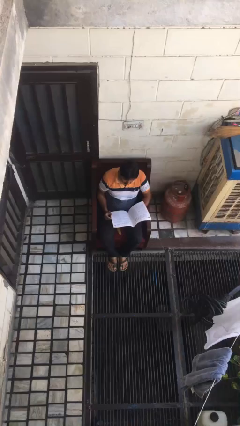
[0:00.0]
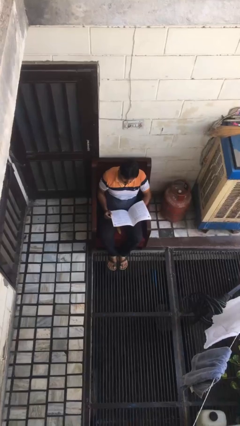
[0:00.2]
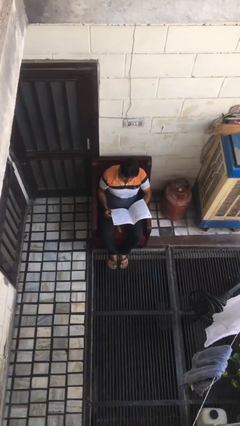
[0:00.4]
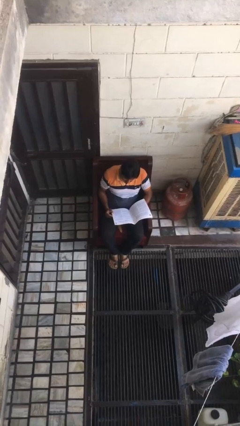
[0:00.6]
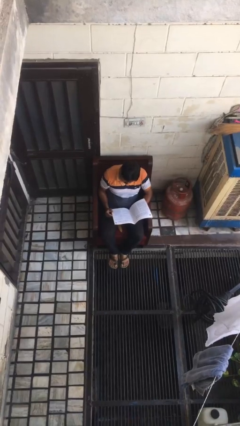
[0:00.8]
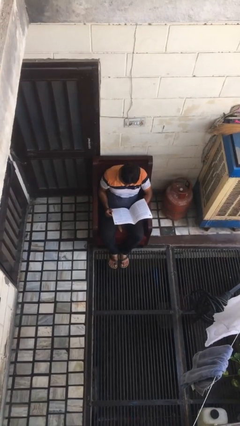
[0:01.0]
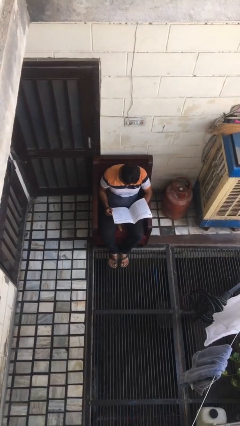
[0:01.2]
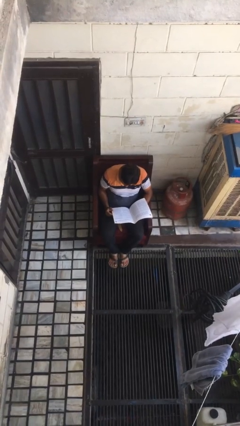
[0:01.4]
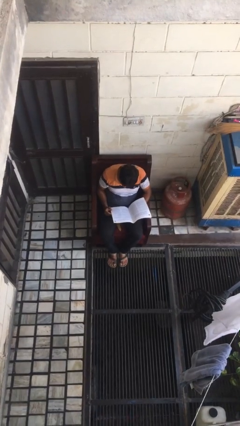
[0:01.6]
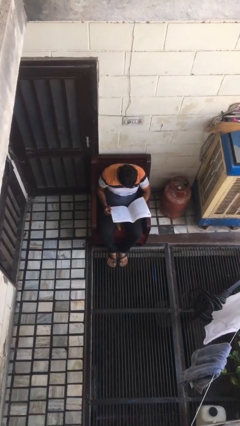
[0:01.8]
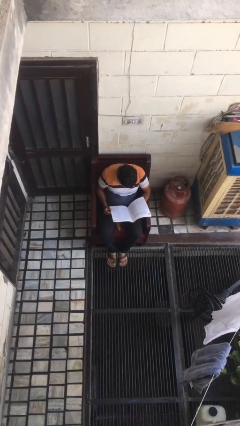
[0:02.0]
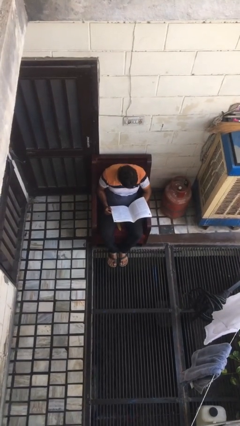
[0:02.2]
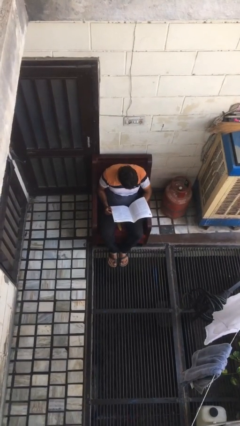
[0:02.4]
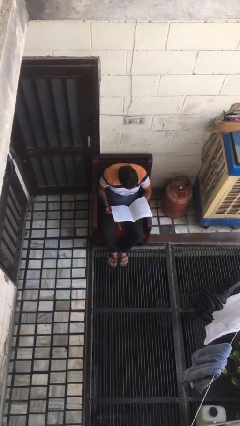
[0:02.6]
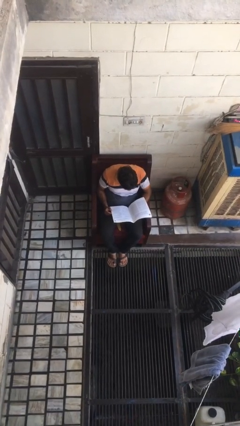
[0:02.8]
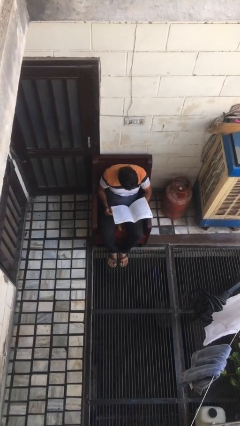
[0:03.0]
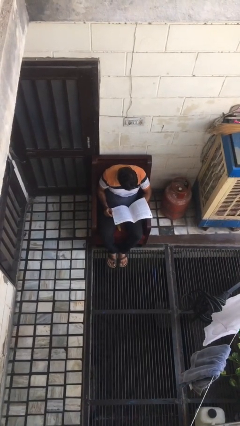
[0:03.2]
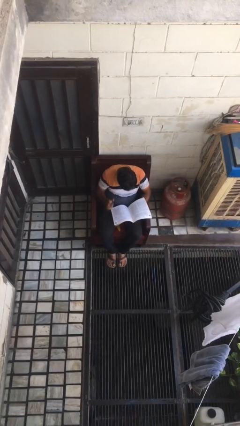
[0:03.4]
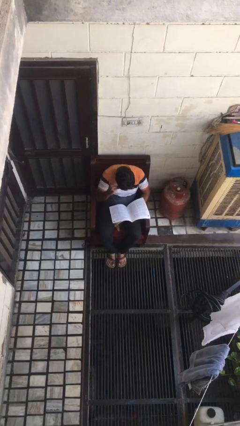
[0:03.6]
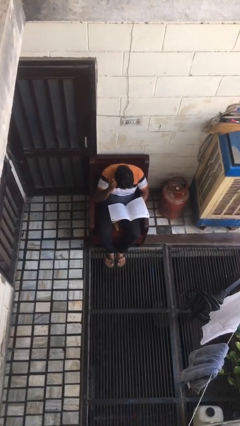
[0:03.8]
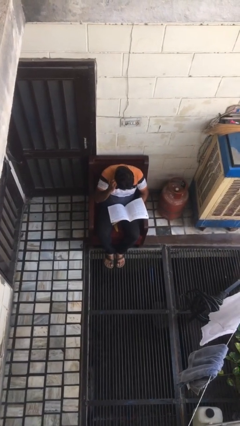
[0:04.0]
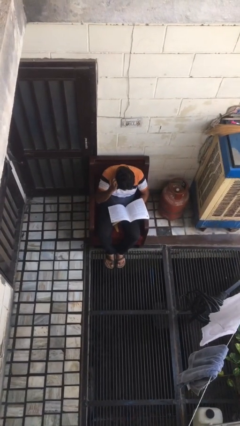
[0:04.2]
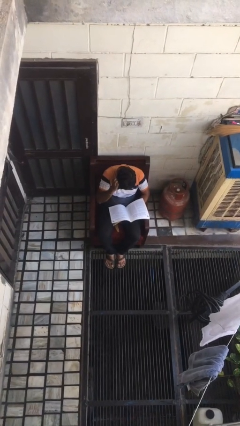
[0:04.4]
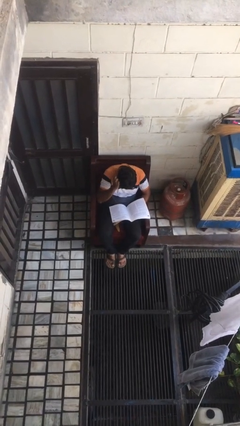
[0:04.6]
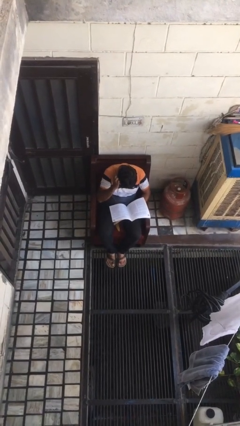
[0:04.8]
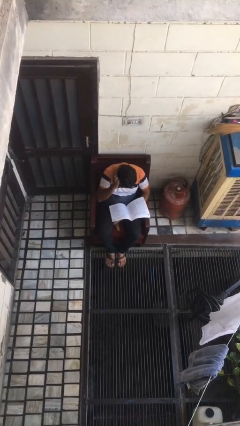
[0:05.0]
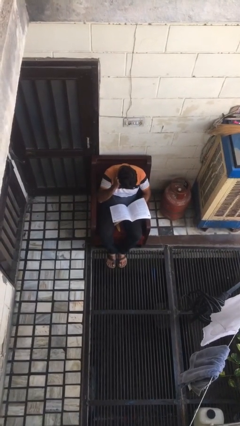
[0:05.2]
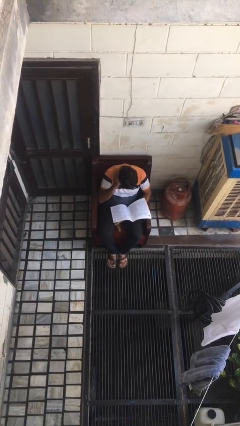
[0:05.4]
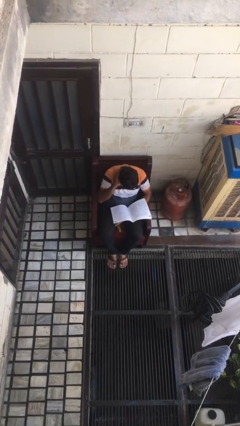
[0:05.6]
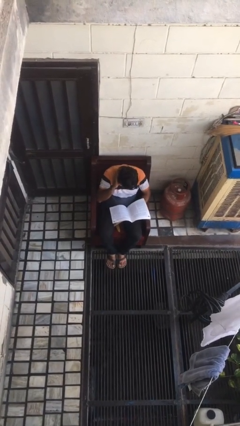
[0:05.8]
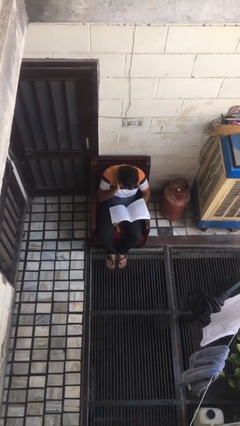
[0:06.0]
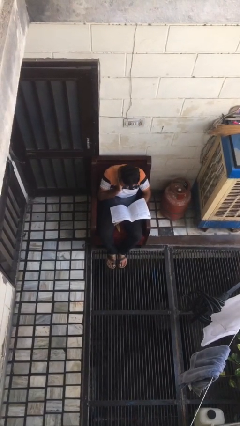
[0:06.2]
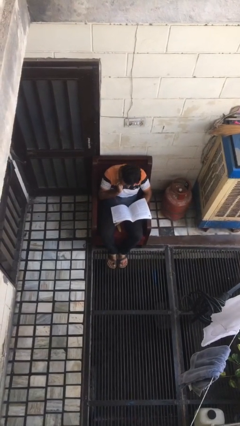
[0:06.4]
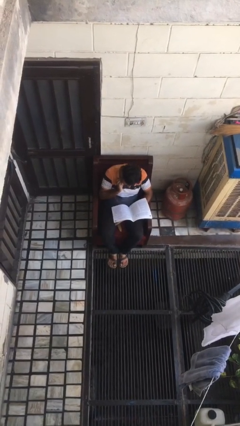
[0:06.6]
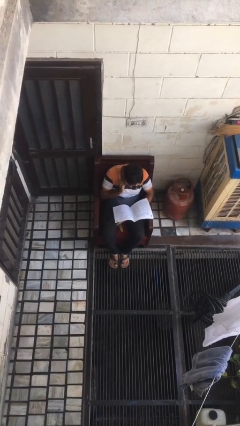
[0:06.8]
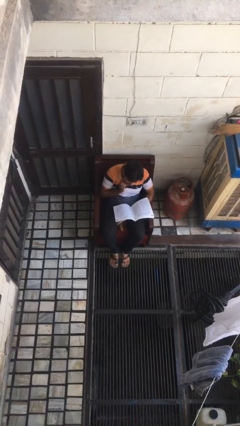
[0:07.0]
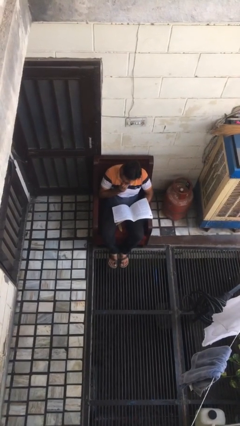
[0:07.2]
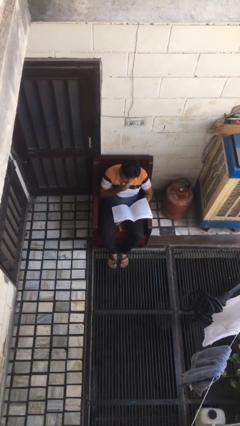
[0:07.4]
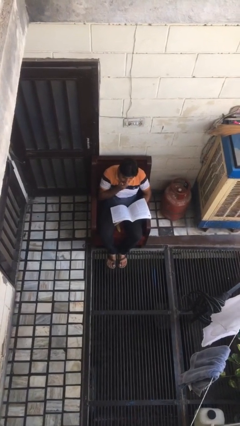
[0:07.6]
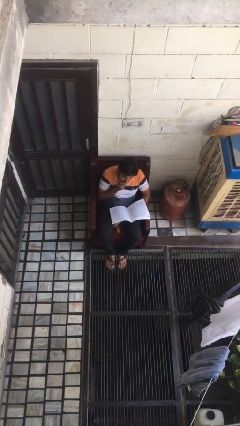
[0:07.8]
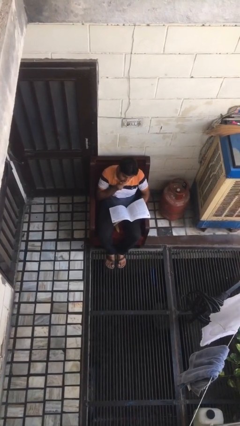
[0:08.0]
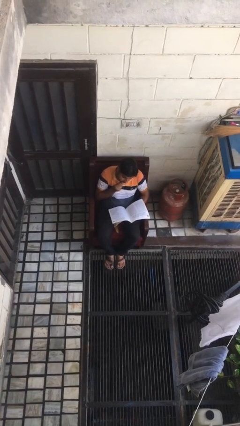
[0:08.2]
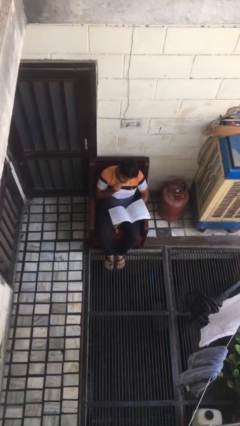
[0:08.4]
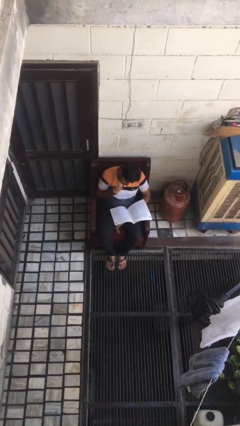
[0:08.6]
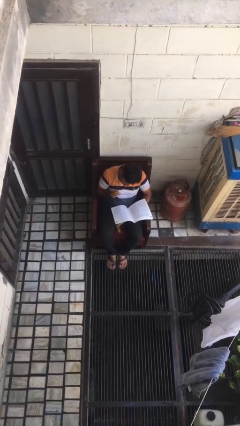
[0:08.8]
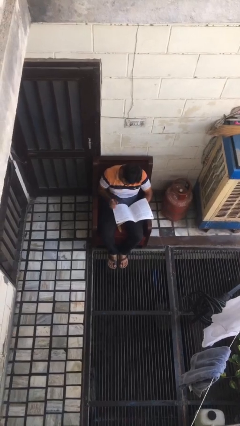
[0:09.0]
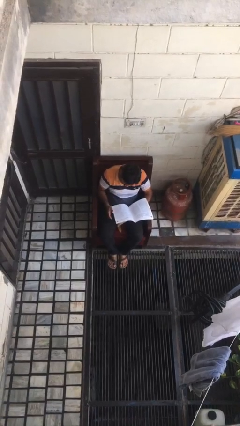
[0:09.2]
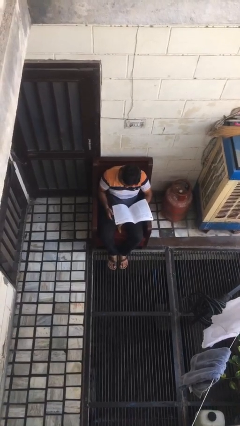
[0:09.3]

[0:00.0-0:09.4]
person reads document

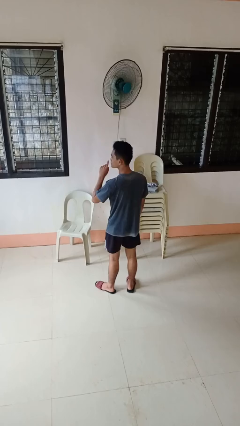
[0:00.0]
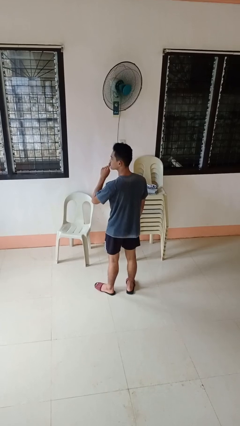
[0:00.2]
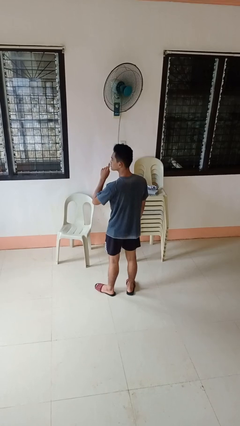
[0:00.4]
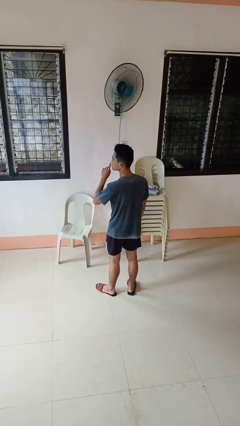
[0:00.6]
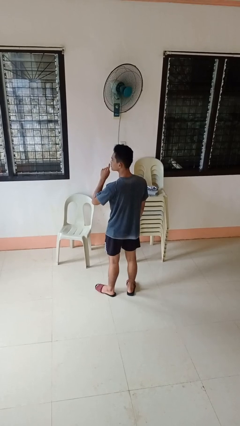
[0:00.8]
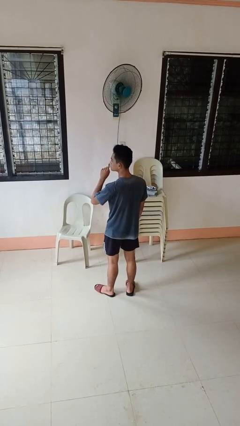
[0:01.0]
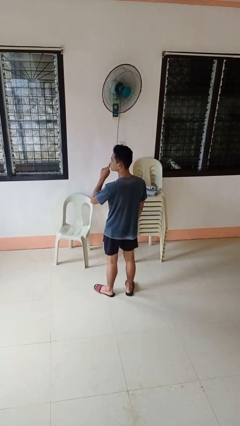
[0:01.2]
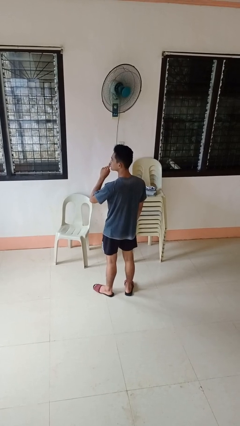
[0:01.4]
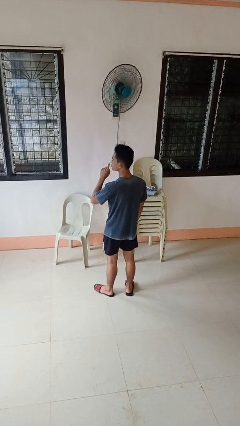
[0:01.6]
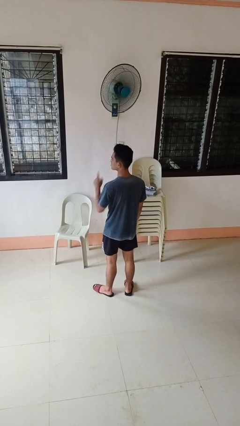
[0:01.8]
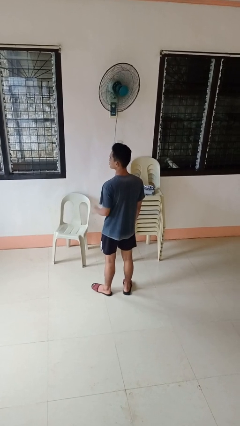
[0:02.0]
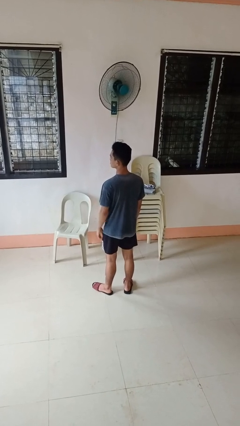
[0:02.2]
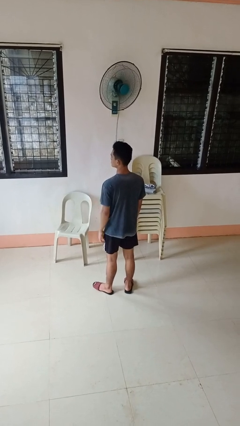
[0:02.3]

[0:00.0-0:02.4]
person gestures be quiet

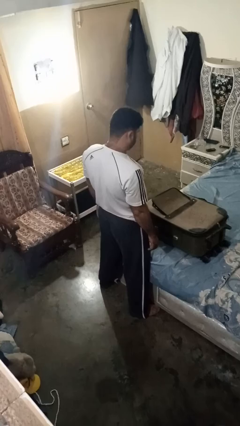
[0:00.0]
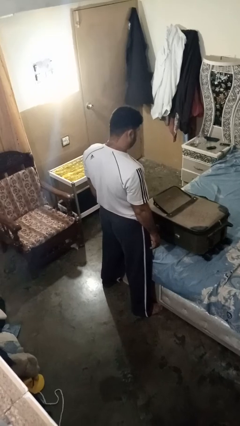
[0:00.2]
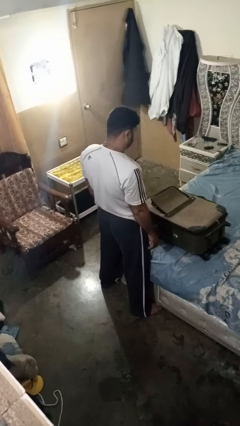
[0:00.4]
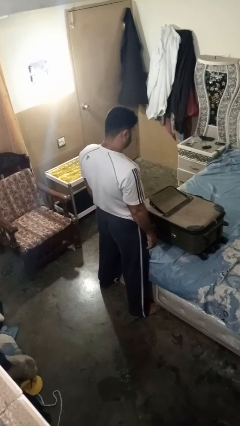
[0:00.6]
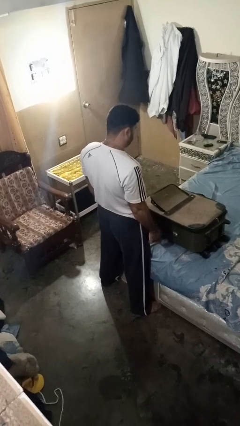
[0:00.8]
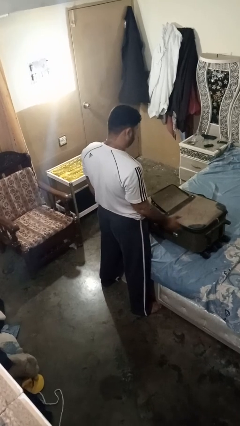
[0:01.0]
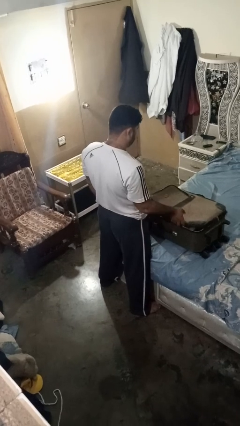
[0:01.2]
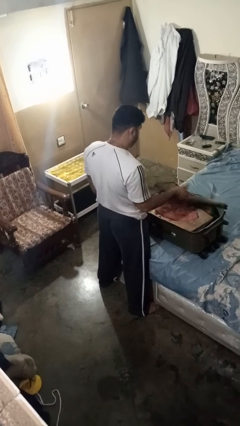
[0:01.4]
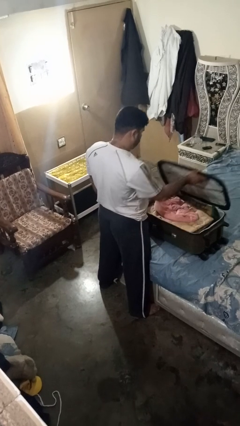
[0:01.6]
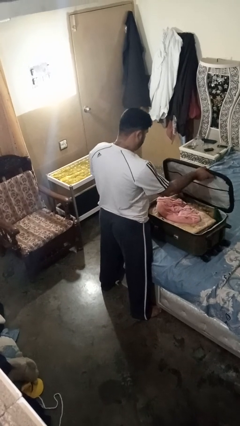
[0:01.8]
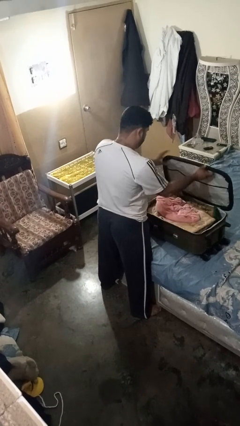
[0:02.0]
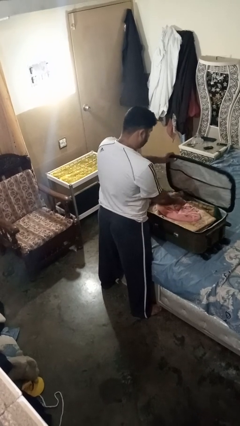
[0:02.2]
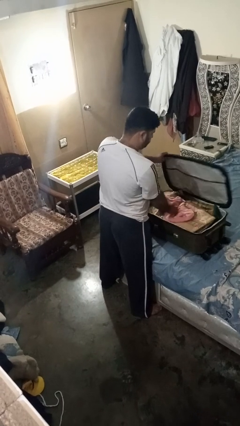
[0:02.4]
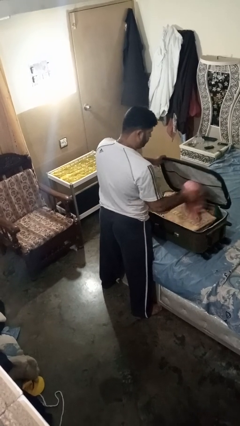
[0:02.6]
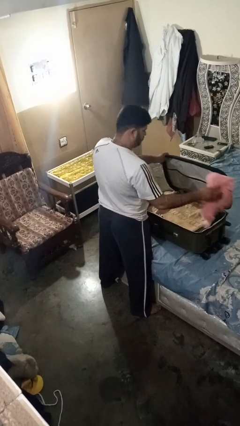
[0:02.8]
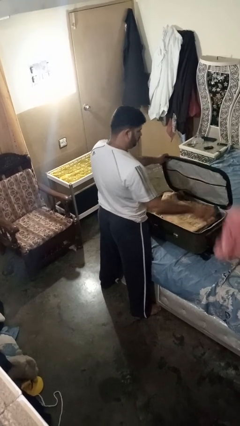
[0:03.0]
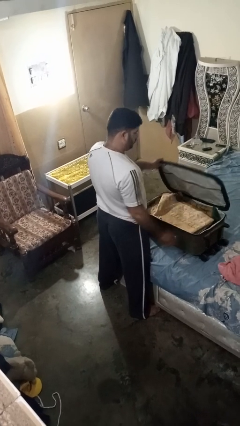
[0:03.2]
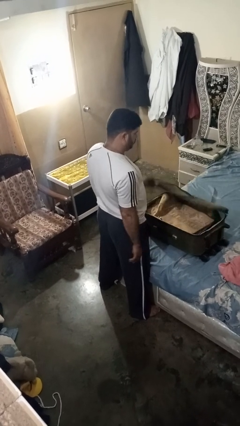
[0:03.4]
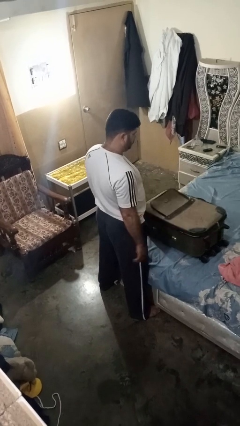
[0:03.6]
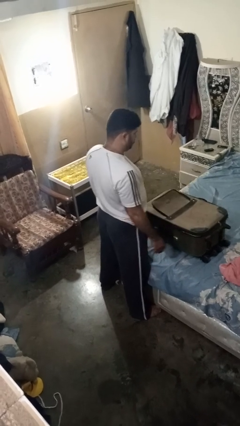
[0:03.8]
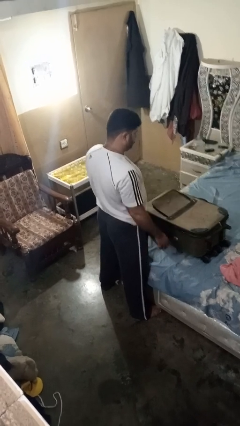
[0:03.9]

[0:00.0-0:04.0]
person unloads clothes from suitcase

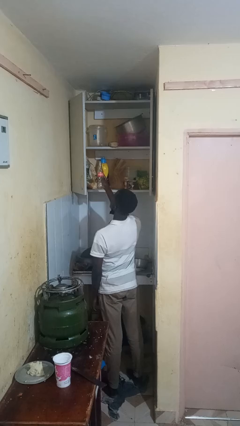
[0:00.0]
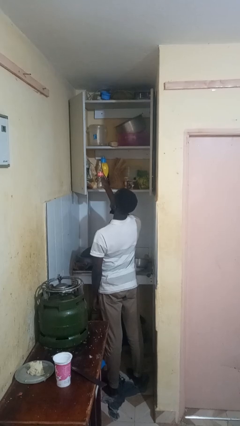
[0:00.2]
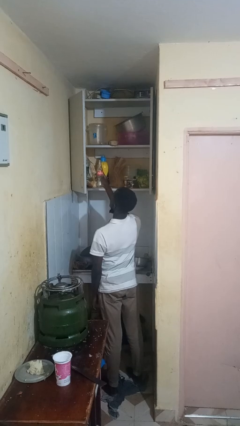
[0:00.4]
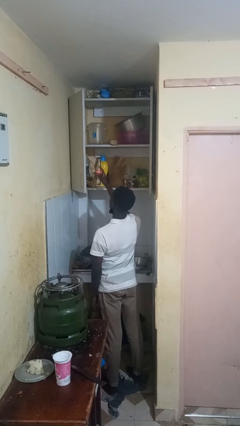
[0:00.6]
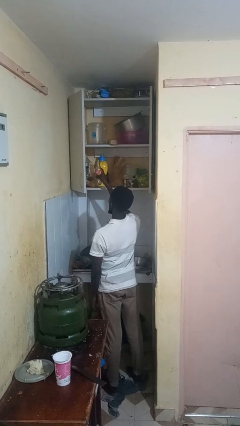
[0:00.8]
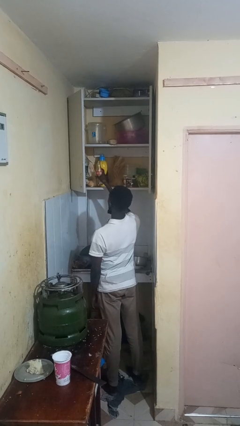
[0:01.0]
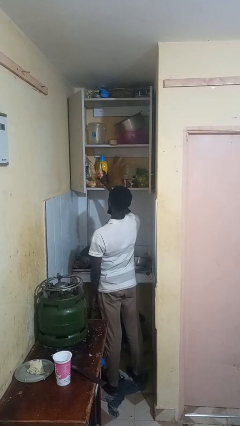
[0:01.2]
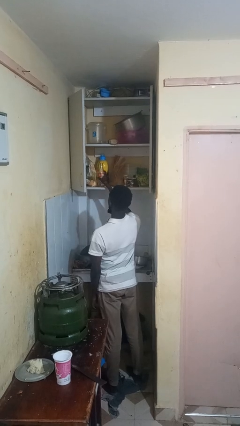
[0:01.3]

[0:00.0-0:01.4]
person puts down object into cabinet

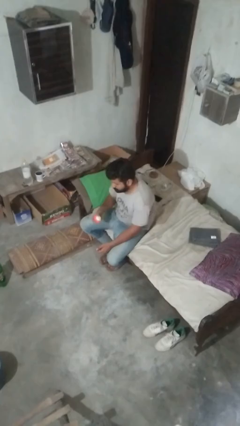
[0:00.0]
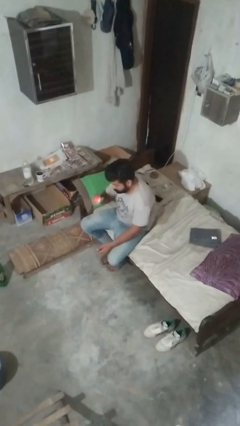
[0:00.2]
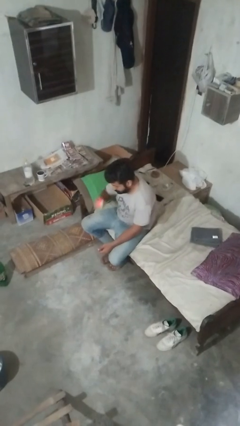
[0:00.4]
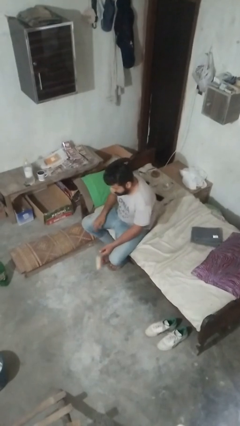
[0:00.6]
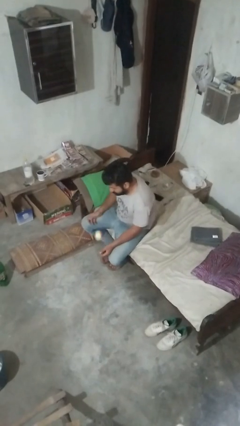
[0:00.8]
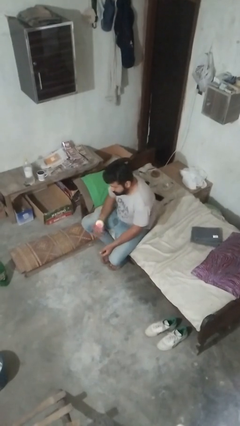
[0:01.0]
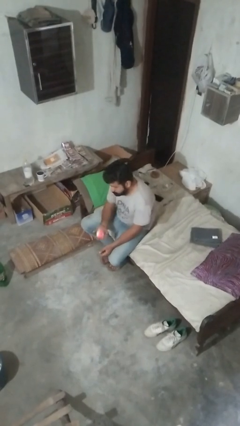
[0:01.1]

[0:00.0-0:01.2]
person bounces ball on floor
